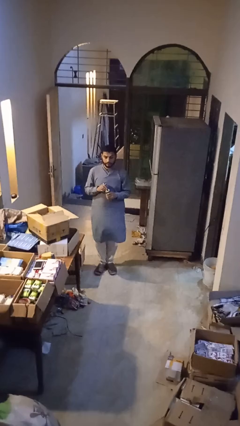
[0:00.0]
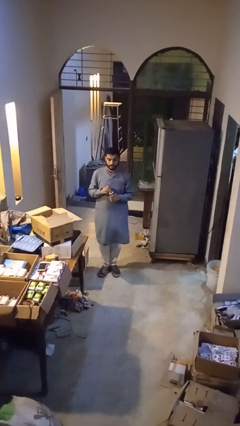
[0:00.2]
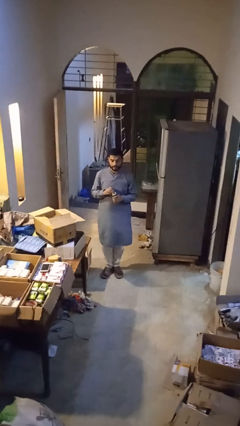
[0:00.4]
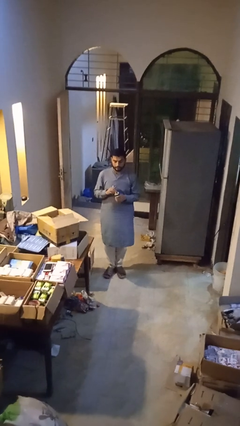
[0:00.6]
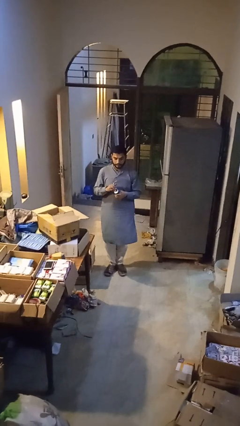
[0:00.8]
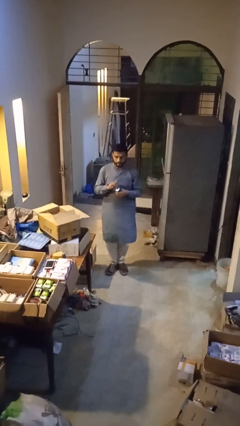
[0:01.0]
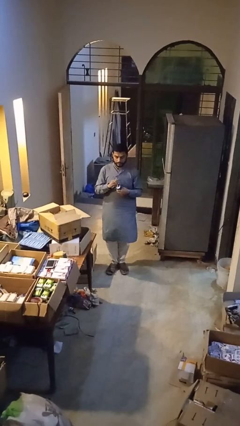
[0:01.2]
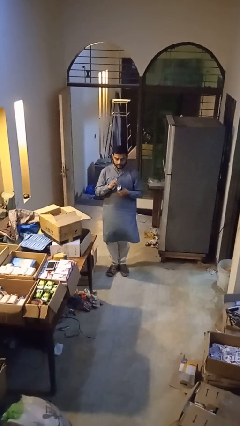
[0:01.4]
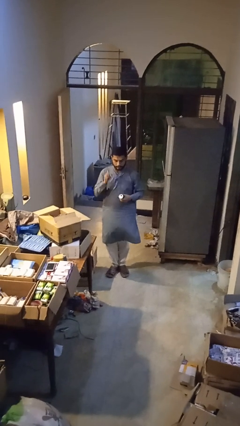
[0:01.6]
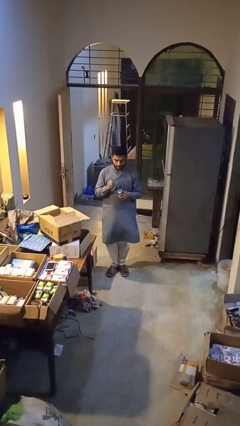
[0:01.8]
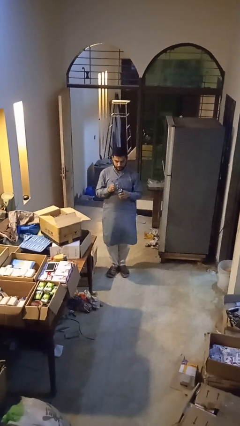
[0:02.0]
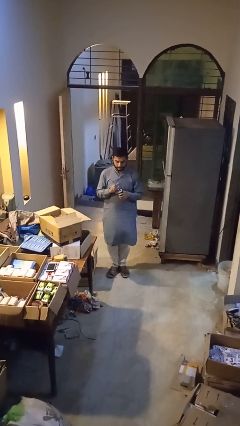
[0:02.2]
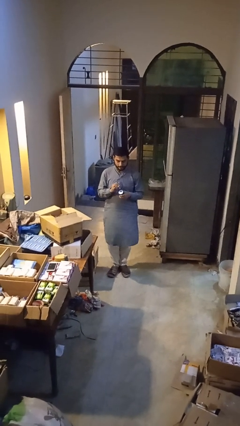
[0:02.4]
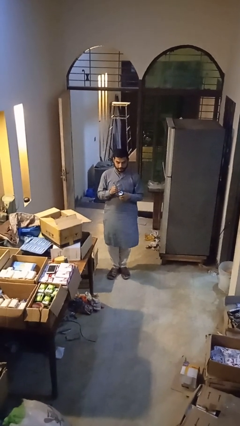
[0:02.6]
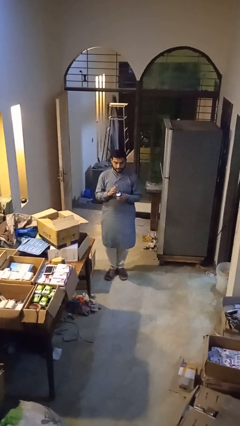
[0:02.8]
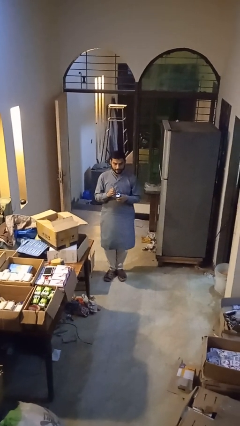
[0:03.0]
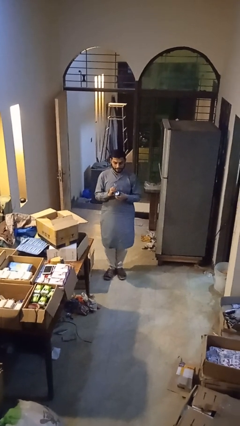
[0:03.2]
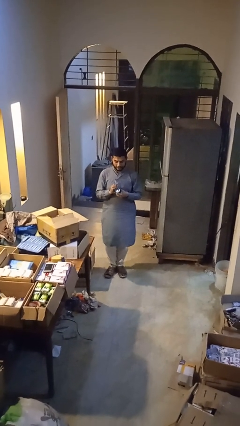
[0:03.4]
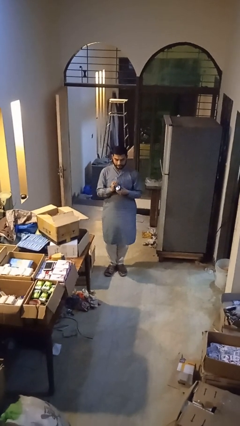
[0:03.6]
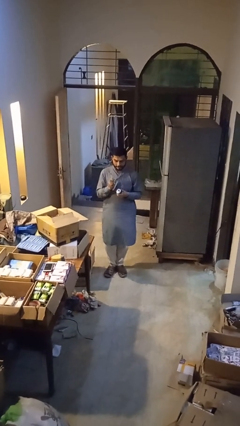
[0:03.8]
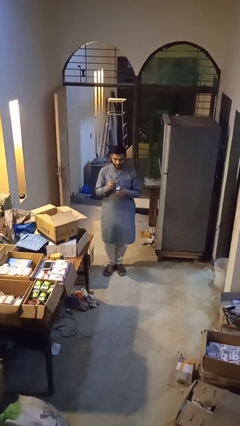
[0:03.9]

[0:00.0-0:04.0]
person opens can with can opener

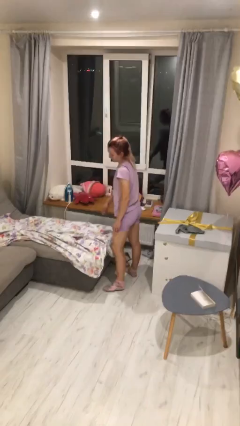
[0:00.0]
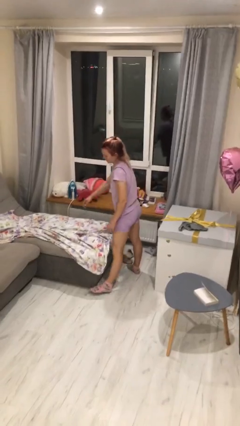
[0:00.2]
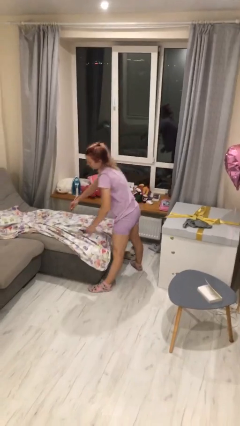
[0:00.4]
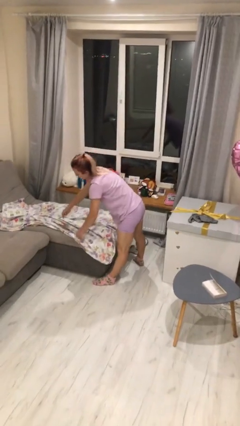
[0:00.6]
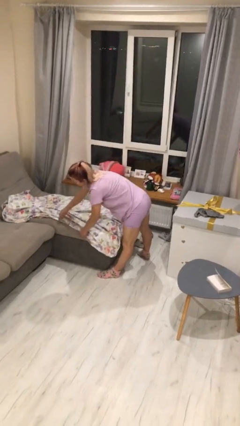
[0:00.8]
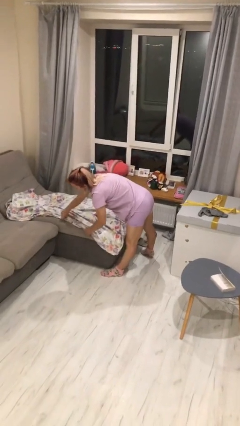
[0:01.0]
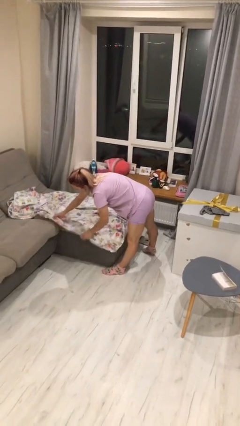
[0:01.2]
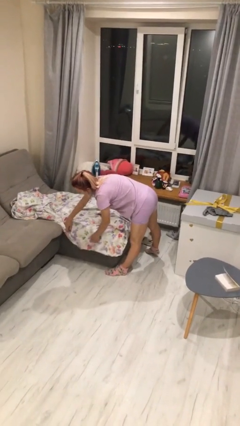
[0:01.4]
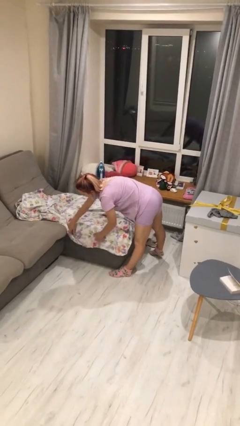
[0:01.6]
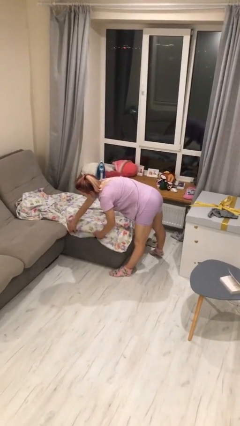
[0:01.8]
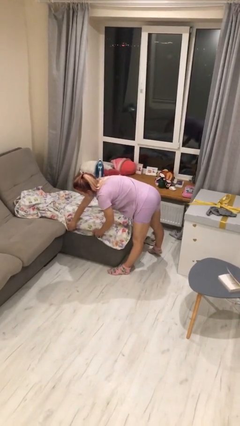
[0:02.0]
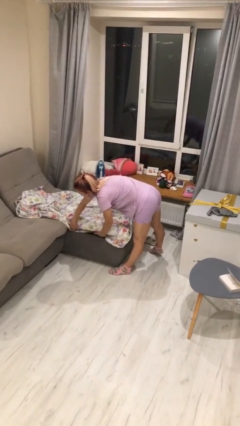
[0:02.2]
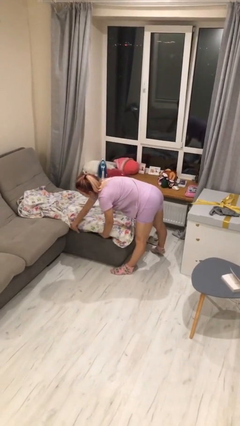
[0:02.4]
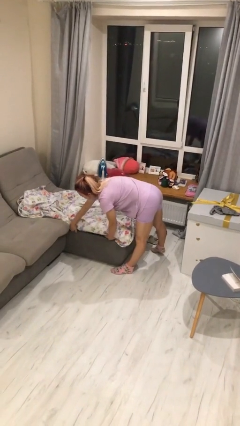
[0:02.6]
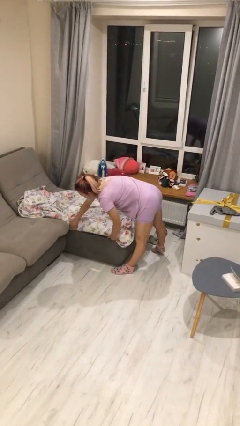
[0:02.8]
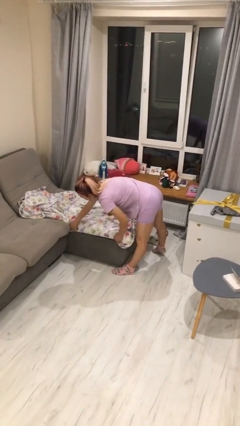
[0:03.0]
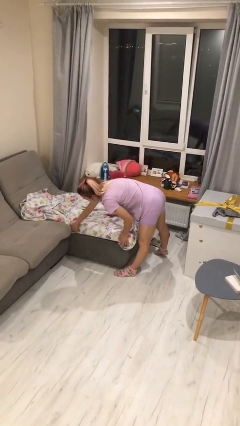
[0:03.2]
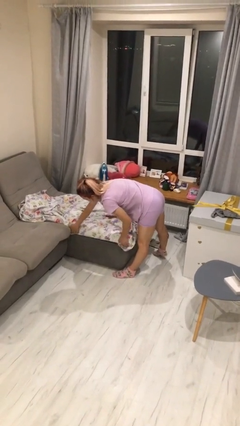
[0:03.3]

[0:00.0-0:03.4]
person makes bed

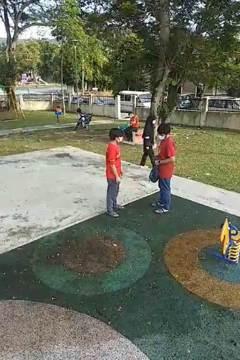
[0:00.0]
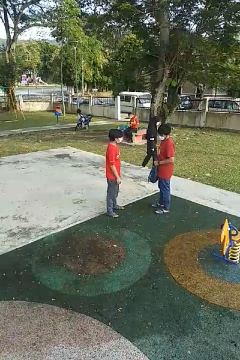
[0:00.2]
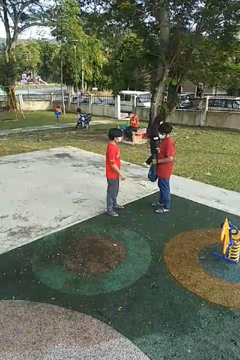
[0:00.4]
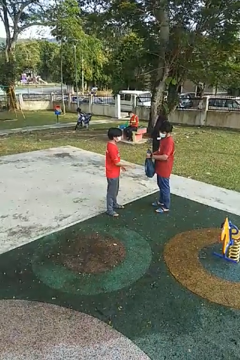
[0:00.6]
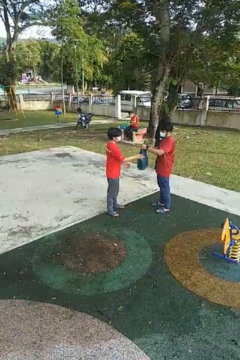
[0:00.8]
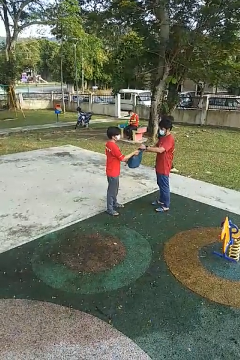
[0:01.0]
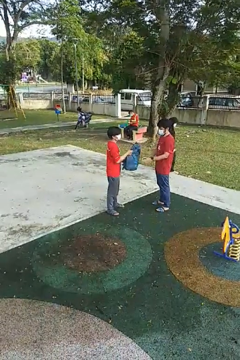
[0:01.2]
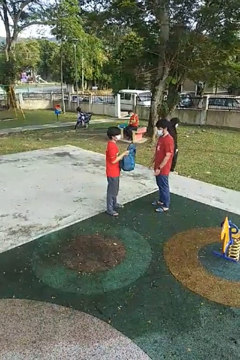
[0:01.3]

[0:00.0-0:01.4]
person transfers object to person

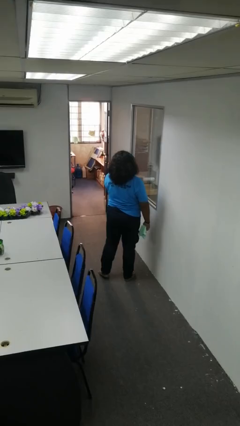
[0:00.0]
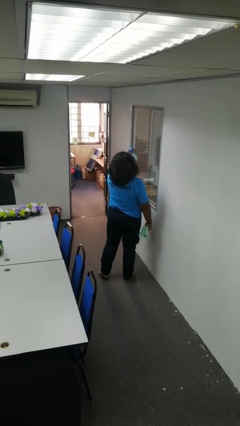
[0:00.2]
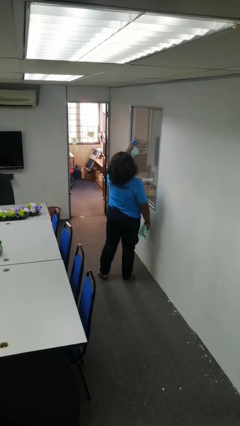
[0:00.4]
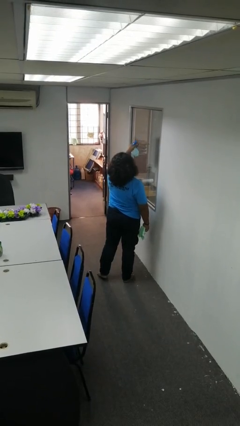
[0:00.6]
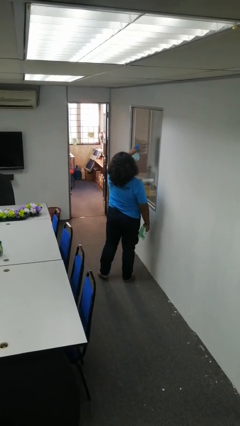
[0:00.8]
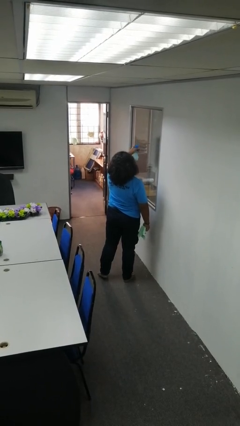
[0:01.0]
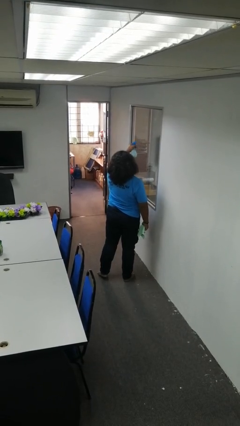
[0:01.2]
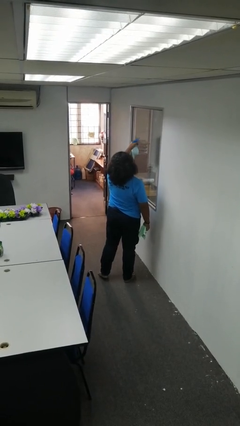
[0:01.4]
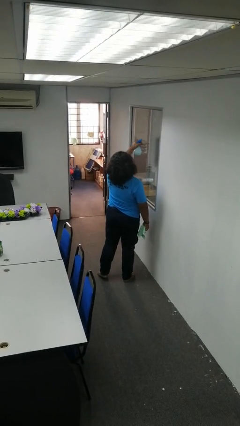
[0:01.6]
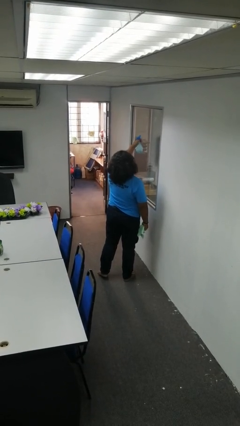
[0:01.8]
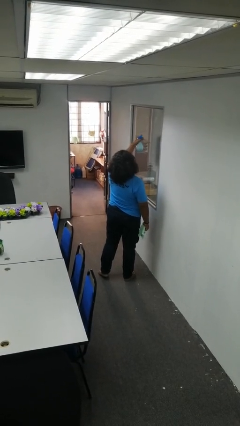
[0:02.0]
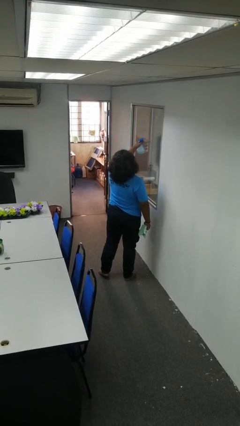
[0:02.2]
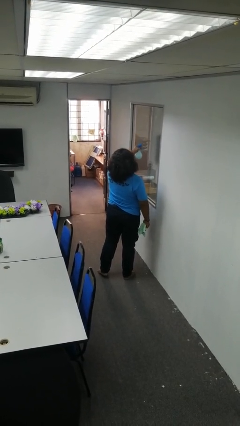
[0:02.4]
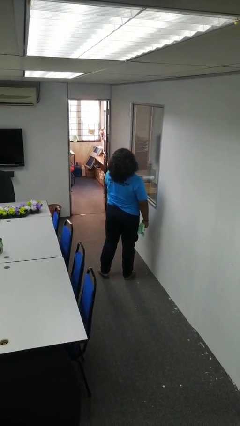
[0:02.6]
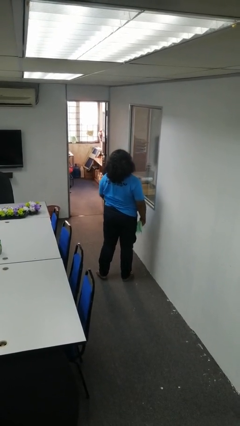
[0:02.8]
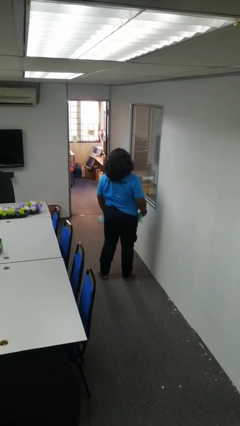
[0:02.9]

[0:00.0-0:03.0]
person sprays from bottle

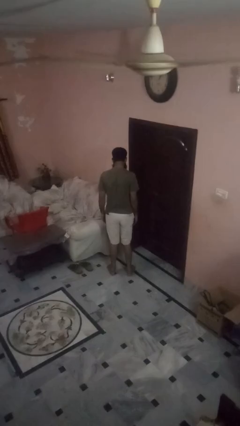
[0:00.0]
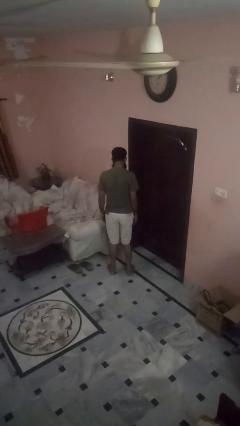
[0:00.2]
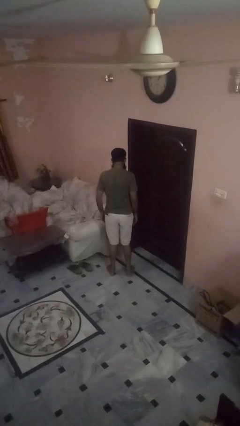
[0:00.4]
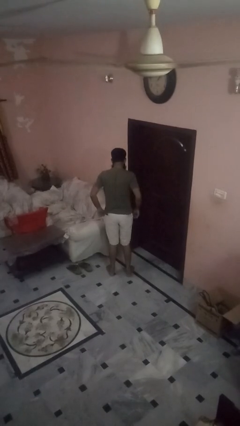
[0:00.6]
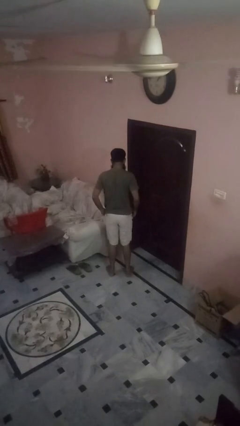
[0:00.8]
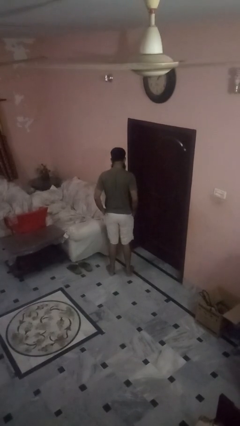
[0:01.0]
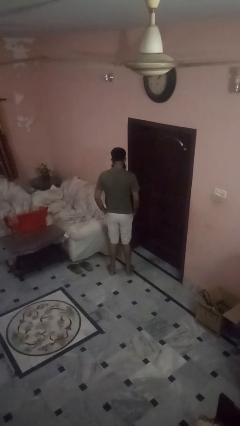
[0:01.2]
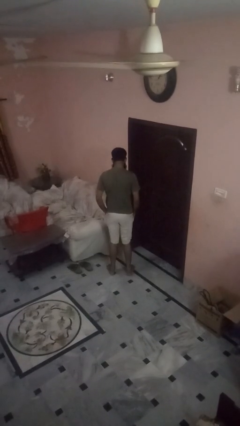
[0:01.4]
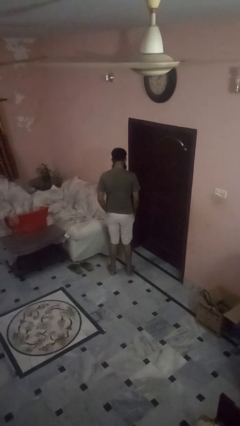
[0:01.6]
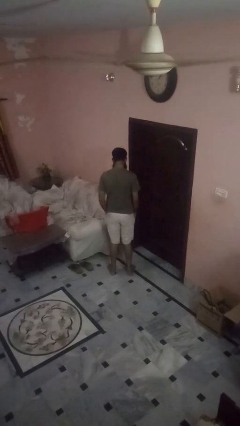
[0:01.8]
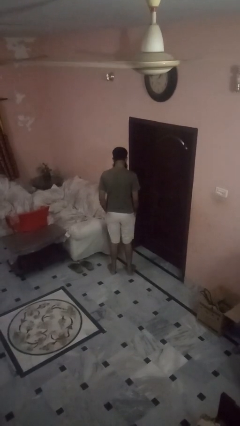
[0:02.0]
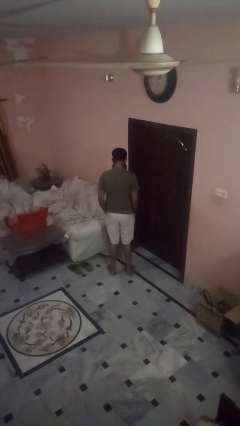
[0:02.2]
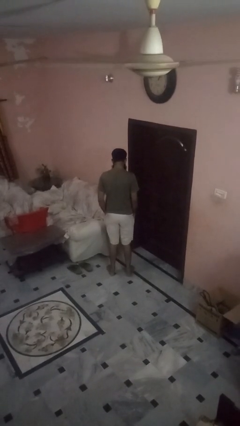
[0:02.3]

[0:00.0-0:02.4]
person puts hands in back pockets

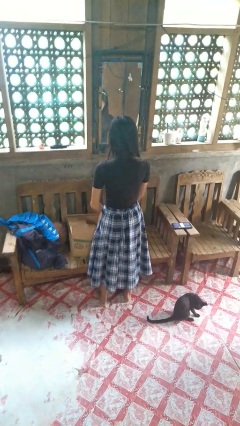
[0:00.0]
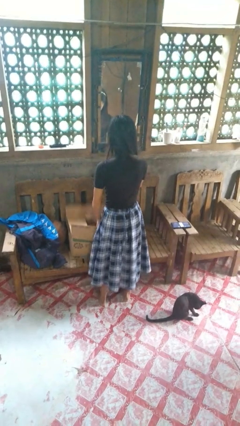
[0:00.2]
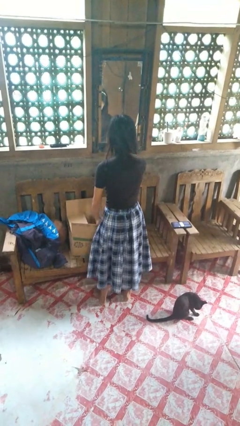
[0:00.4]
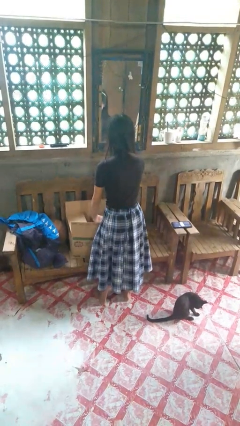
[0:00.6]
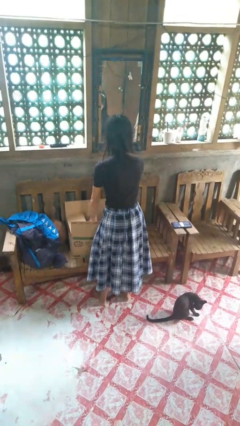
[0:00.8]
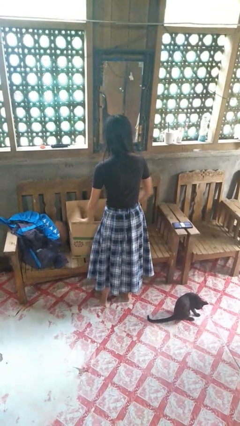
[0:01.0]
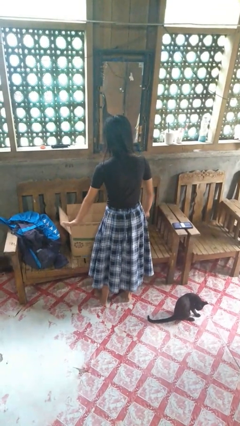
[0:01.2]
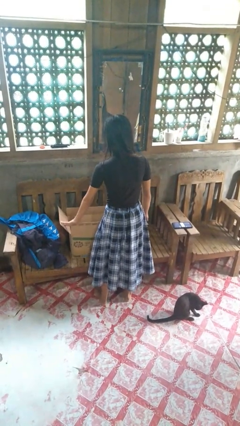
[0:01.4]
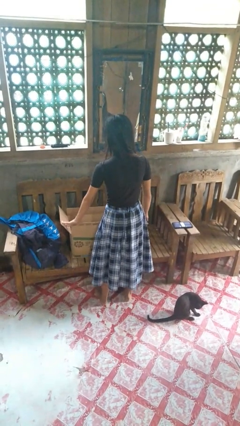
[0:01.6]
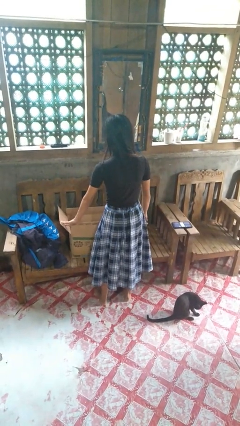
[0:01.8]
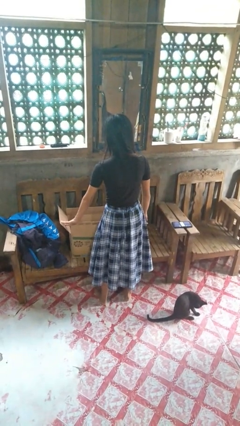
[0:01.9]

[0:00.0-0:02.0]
person opens box

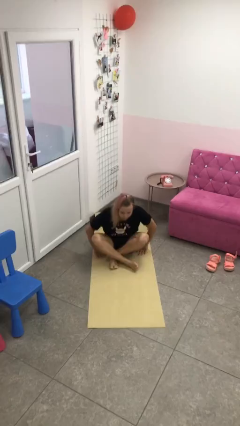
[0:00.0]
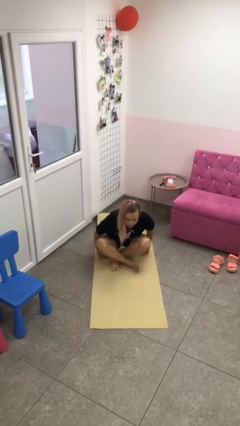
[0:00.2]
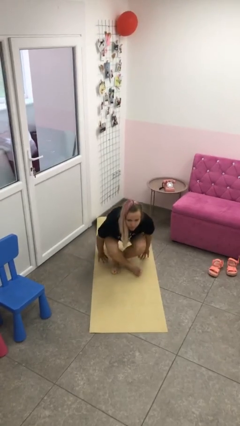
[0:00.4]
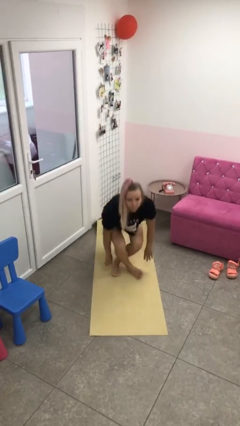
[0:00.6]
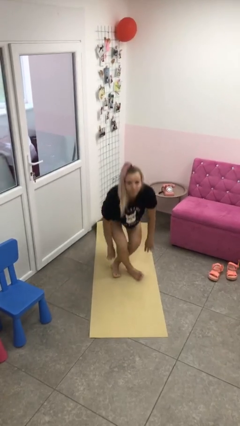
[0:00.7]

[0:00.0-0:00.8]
person stands up from floor

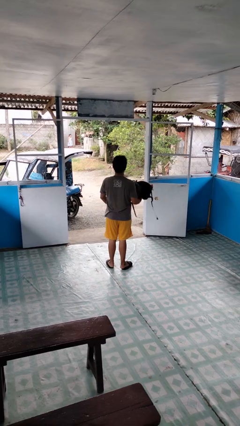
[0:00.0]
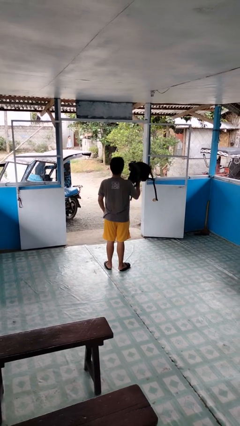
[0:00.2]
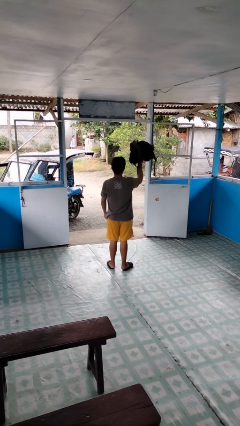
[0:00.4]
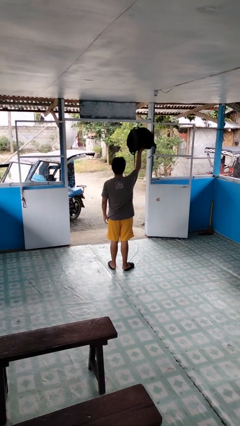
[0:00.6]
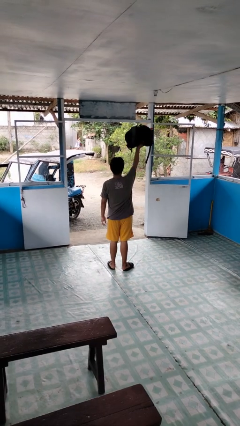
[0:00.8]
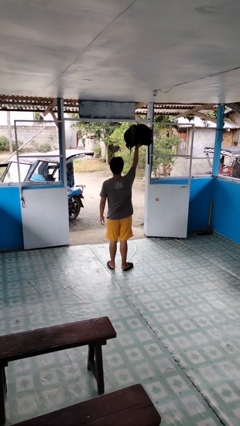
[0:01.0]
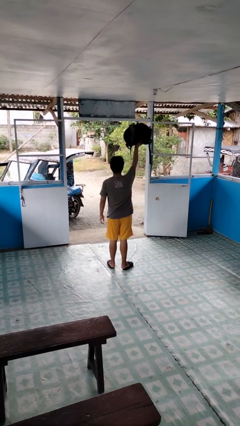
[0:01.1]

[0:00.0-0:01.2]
person holds object above head
